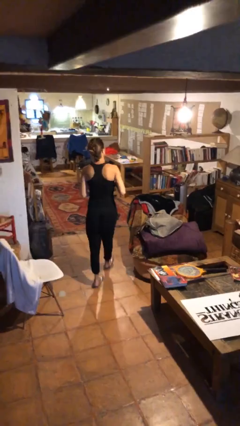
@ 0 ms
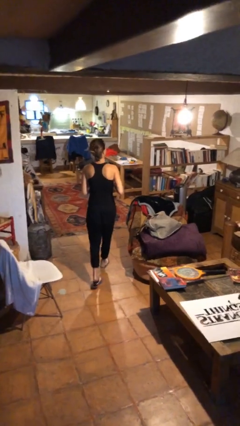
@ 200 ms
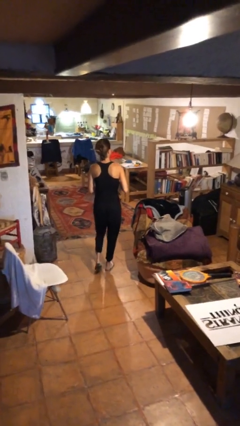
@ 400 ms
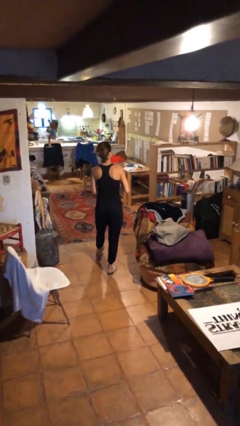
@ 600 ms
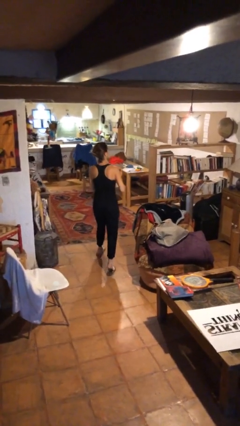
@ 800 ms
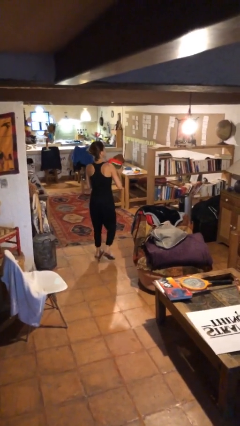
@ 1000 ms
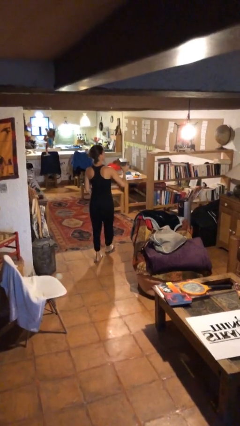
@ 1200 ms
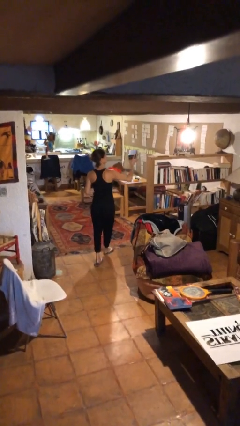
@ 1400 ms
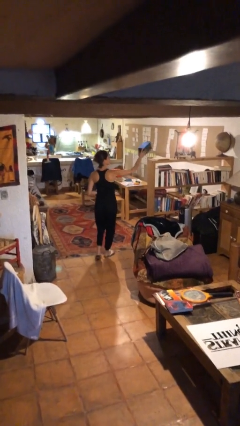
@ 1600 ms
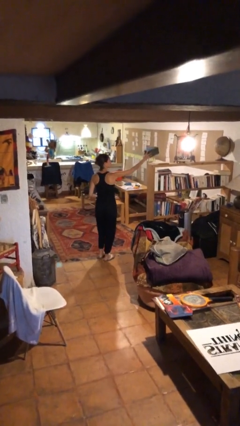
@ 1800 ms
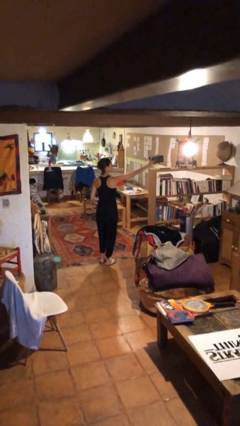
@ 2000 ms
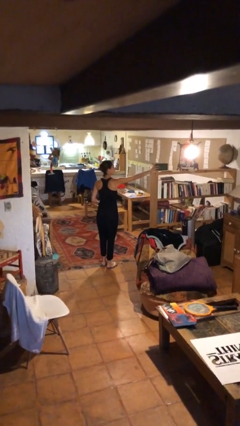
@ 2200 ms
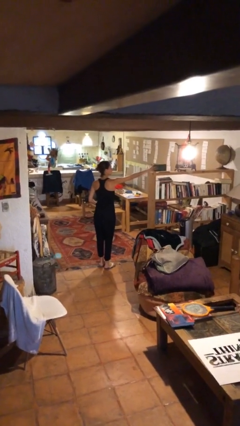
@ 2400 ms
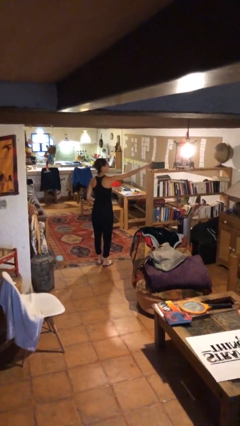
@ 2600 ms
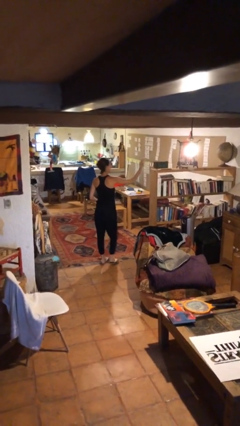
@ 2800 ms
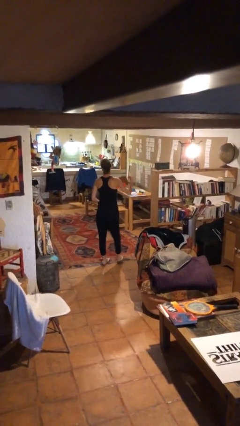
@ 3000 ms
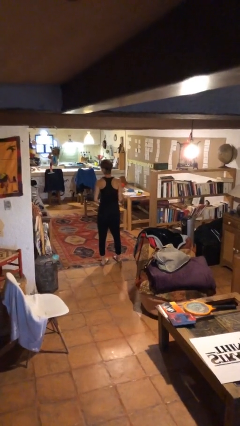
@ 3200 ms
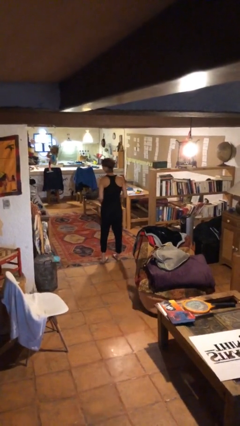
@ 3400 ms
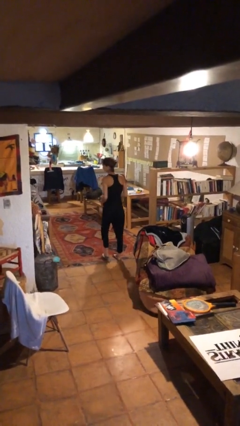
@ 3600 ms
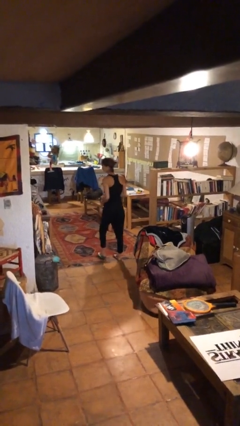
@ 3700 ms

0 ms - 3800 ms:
person puts down object on shelf

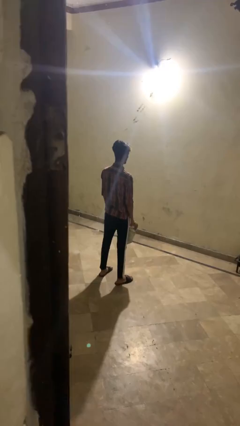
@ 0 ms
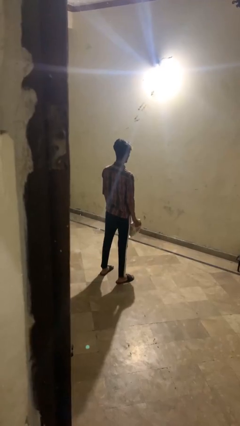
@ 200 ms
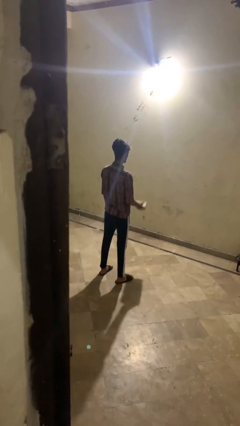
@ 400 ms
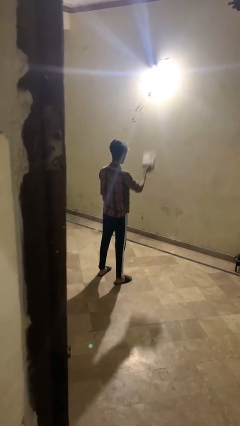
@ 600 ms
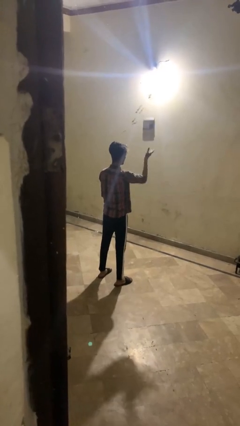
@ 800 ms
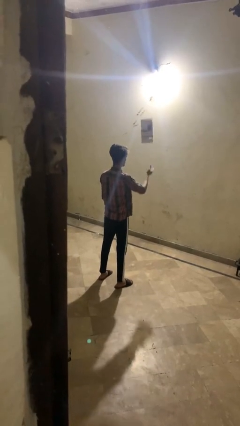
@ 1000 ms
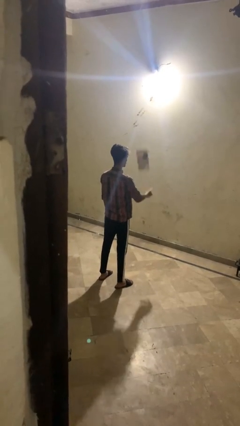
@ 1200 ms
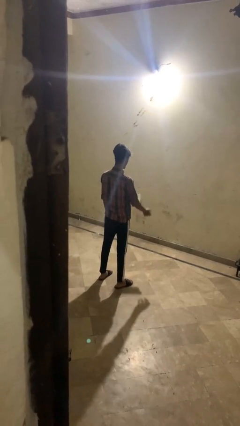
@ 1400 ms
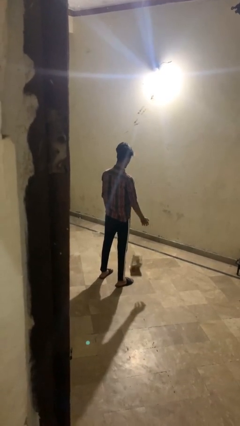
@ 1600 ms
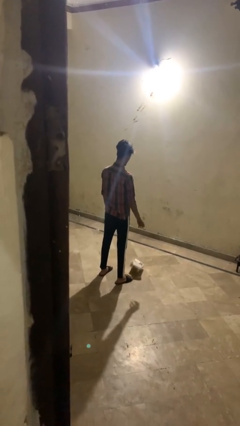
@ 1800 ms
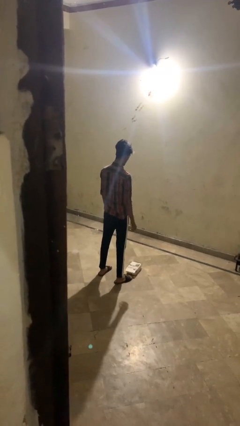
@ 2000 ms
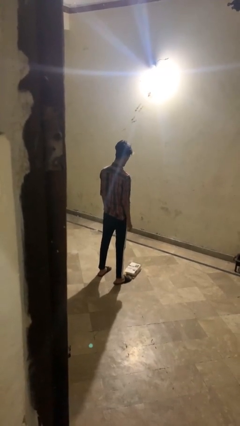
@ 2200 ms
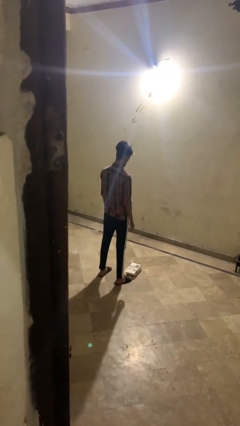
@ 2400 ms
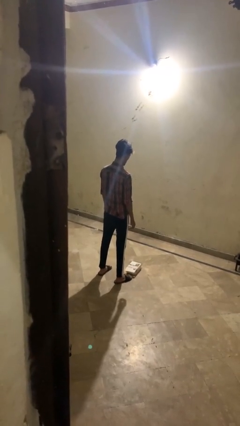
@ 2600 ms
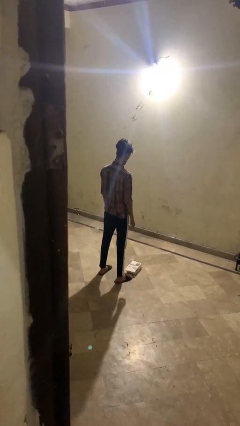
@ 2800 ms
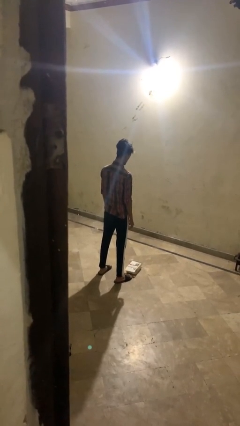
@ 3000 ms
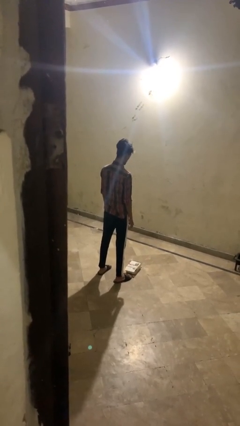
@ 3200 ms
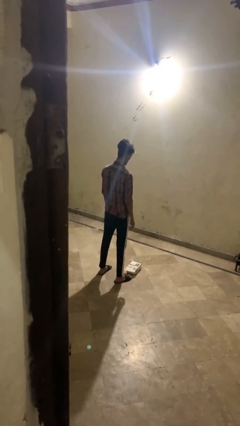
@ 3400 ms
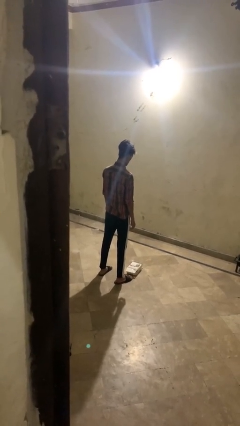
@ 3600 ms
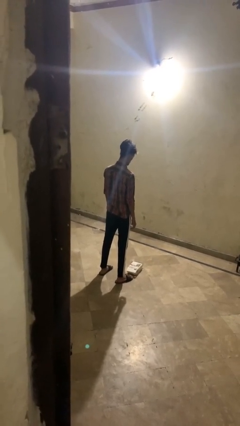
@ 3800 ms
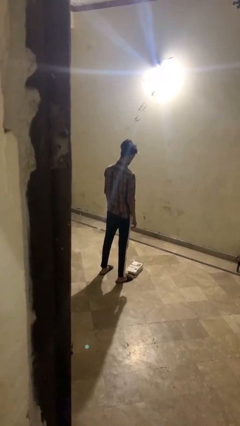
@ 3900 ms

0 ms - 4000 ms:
person throws object into air

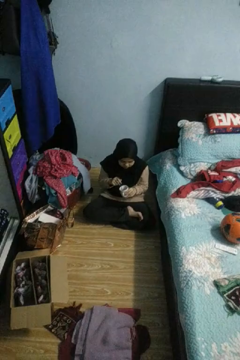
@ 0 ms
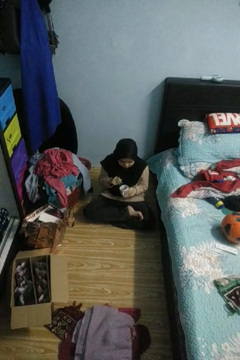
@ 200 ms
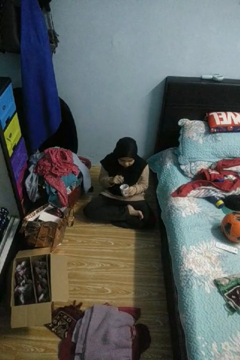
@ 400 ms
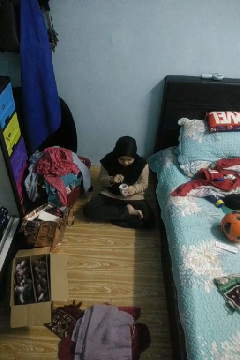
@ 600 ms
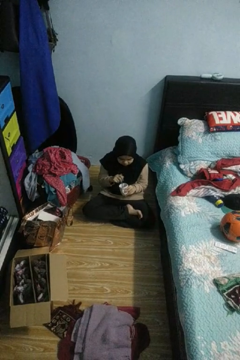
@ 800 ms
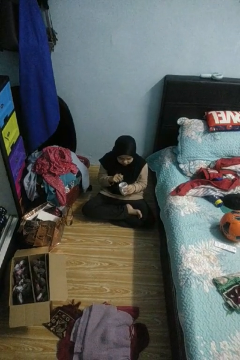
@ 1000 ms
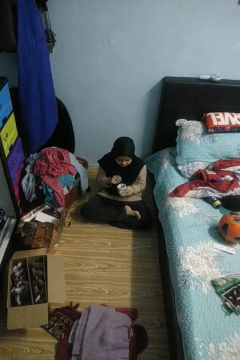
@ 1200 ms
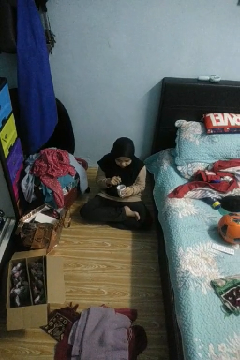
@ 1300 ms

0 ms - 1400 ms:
person stirs mug

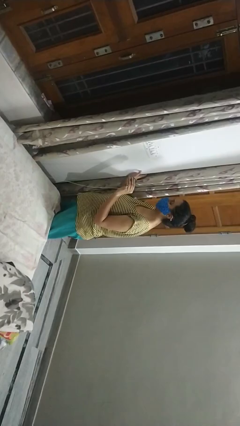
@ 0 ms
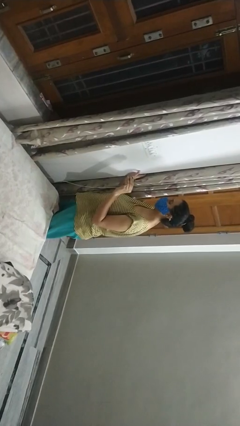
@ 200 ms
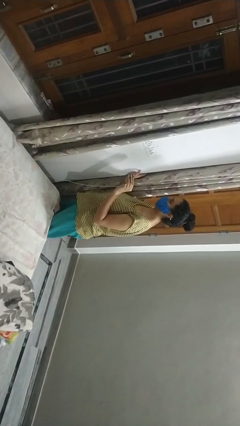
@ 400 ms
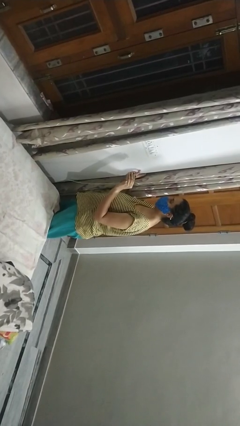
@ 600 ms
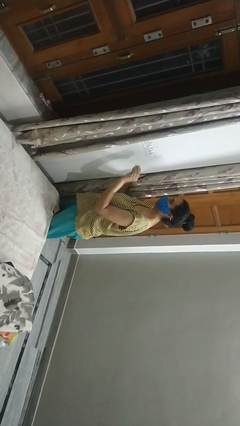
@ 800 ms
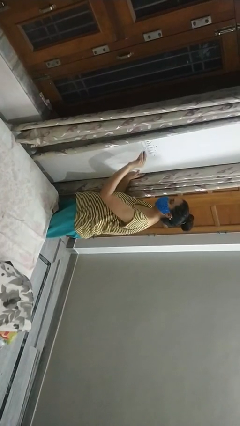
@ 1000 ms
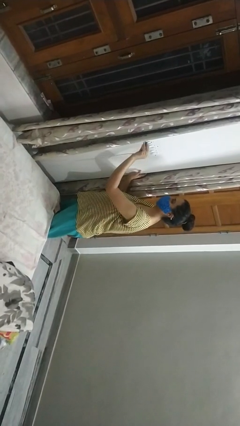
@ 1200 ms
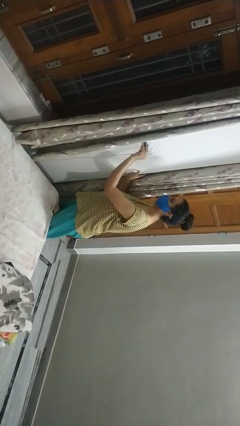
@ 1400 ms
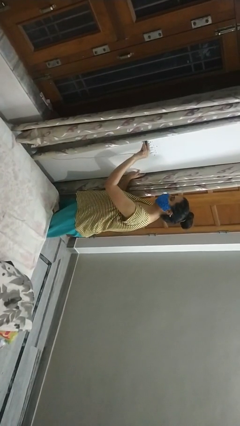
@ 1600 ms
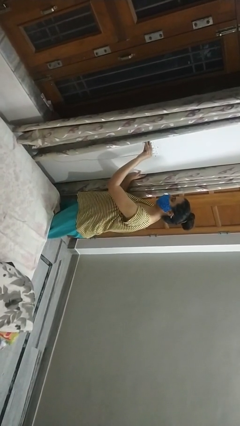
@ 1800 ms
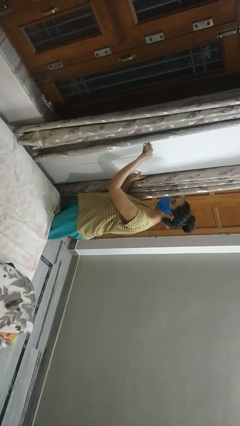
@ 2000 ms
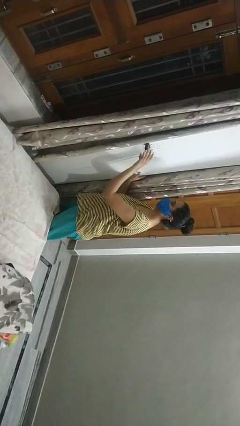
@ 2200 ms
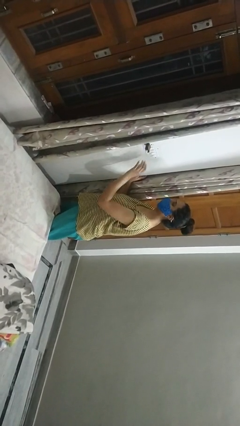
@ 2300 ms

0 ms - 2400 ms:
person plugs into electrical socket

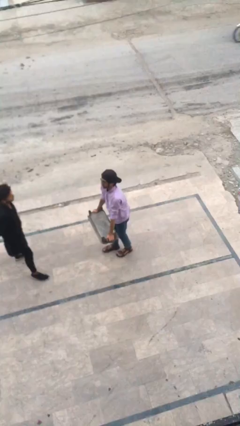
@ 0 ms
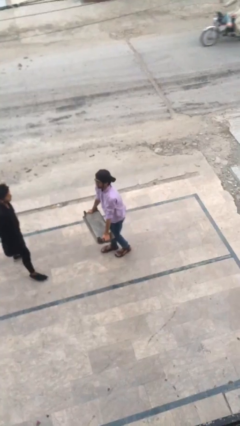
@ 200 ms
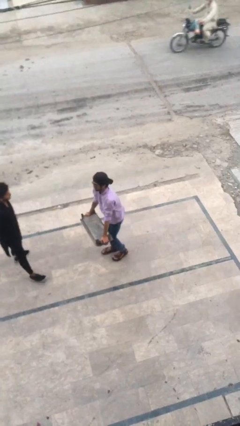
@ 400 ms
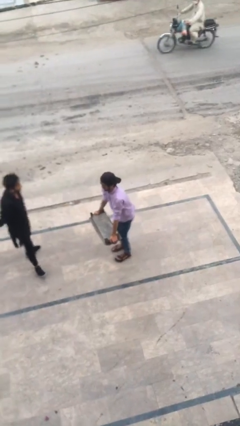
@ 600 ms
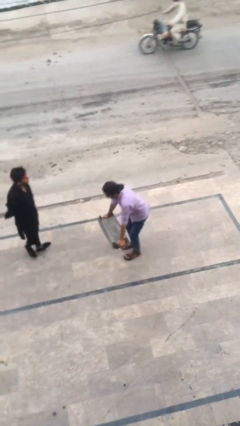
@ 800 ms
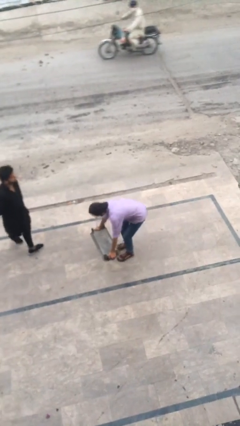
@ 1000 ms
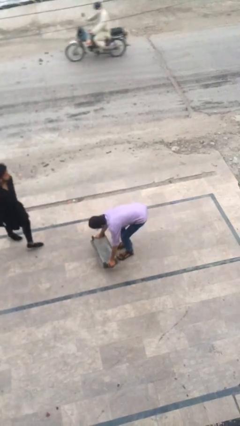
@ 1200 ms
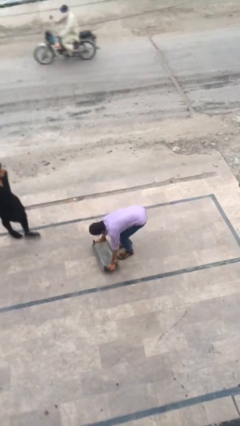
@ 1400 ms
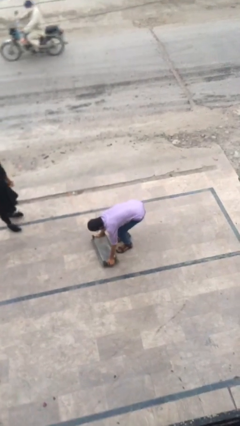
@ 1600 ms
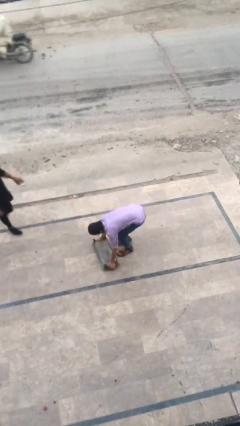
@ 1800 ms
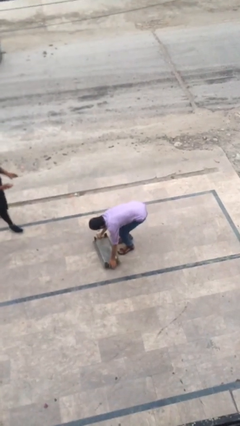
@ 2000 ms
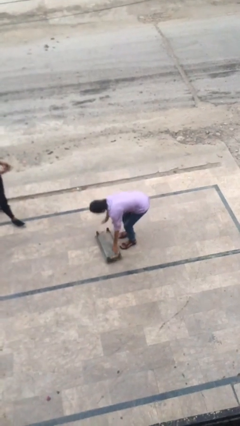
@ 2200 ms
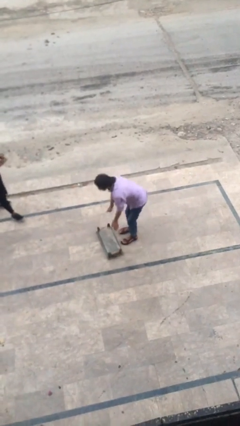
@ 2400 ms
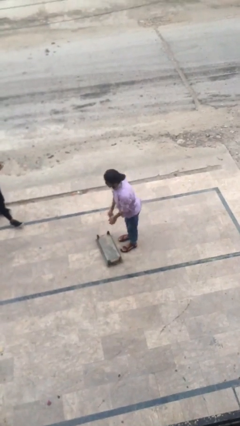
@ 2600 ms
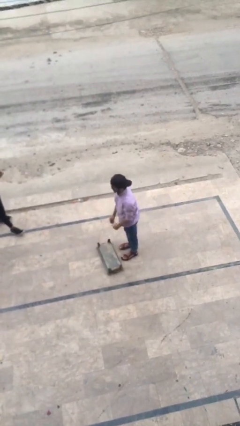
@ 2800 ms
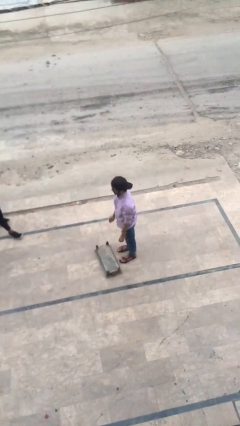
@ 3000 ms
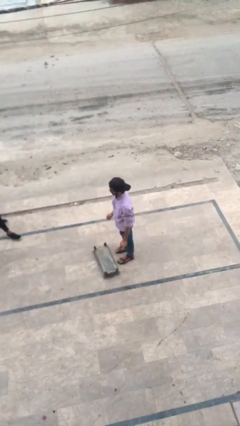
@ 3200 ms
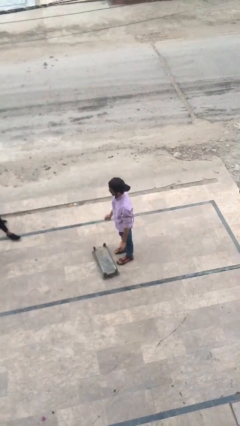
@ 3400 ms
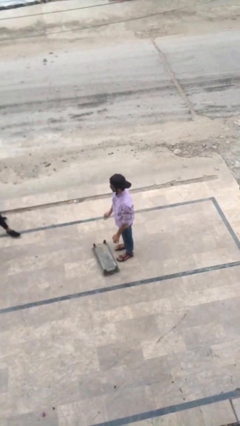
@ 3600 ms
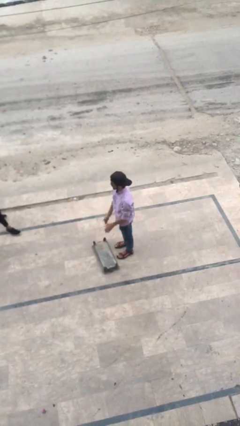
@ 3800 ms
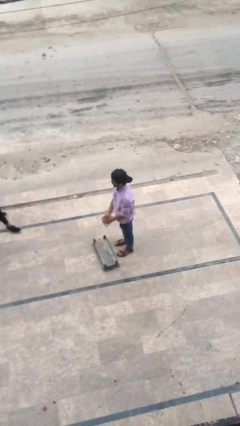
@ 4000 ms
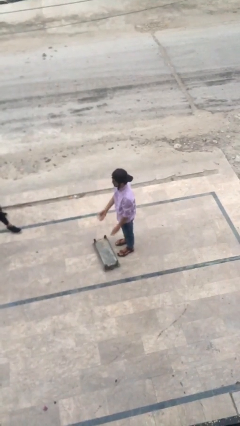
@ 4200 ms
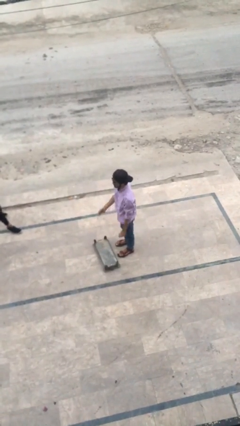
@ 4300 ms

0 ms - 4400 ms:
person puts down object on floor

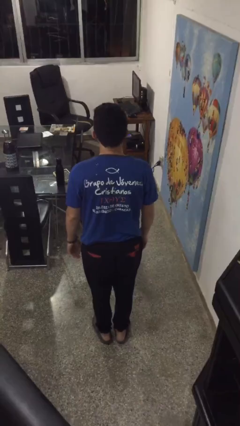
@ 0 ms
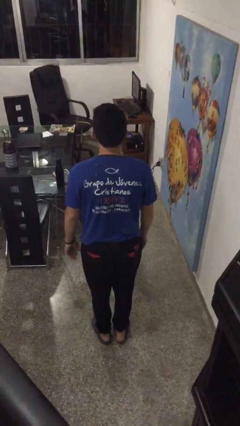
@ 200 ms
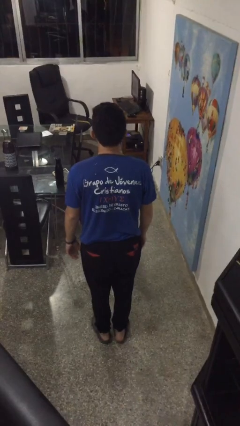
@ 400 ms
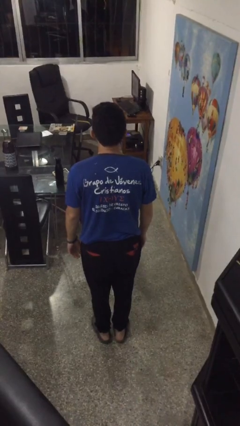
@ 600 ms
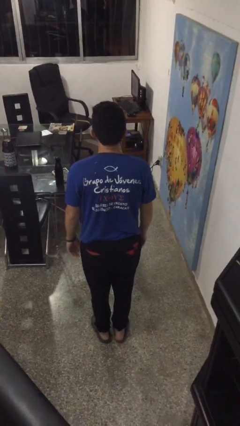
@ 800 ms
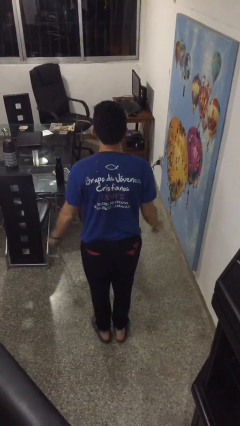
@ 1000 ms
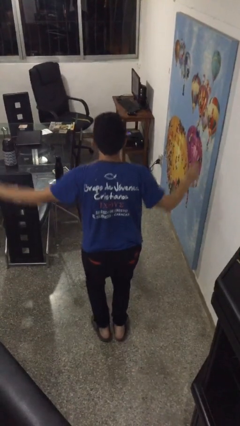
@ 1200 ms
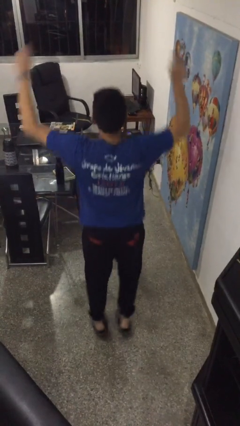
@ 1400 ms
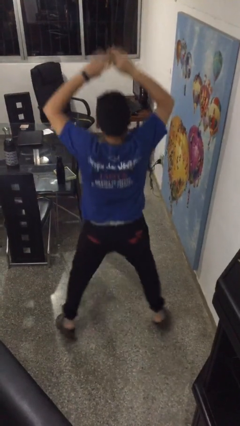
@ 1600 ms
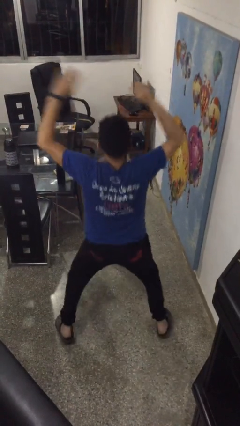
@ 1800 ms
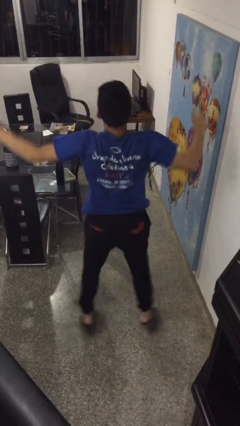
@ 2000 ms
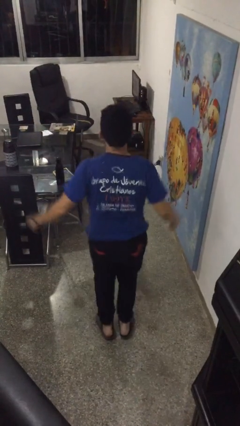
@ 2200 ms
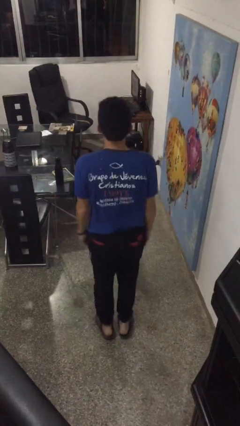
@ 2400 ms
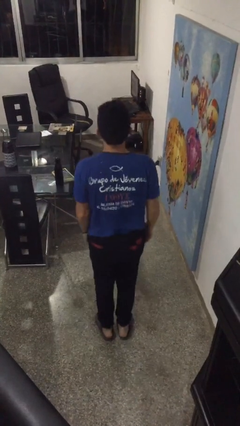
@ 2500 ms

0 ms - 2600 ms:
person exercises with jumping jacks
